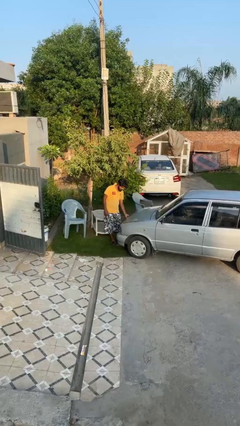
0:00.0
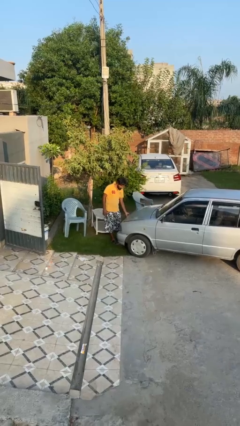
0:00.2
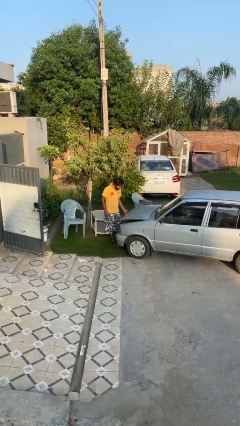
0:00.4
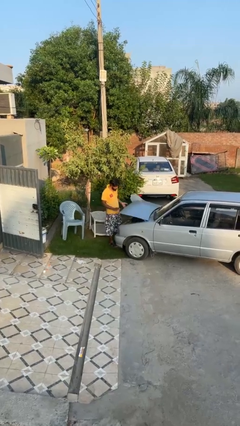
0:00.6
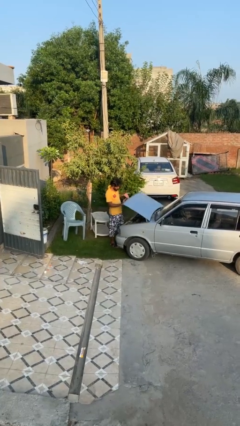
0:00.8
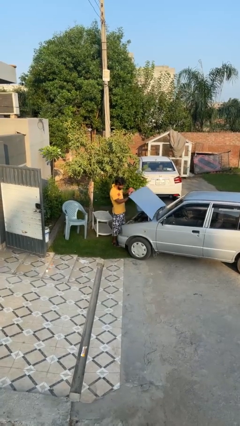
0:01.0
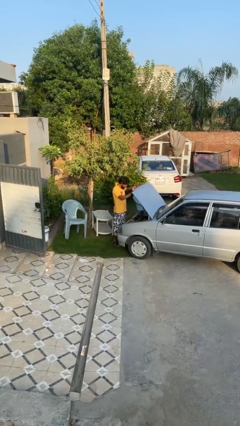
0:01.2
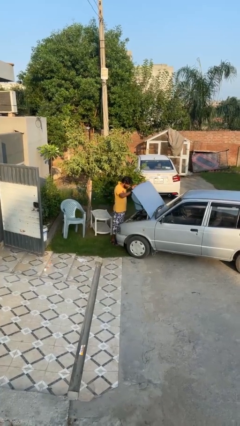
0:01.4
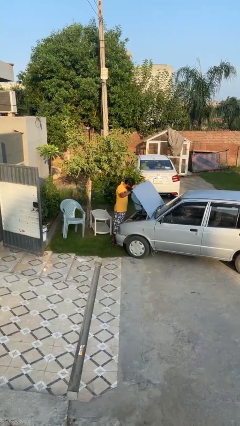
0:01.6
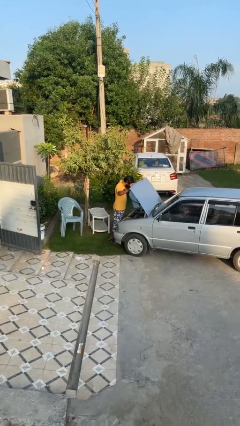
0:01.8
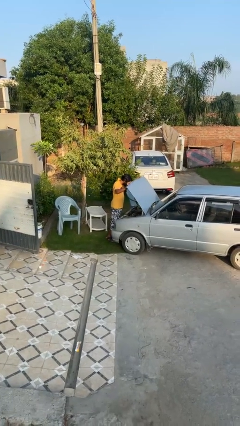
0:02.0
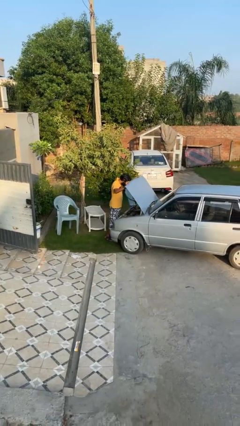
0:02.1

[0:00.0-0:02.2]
person opens car hood

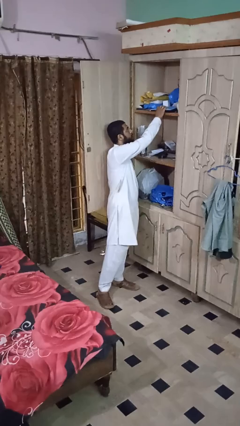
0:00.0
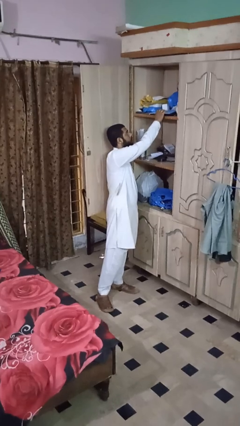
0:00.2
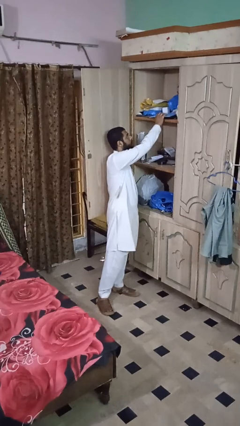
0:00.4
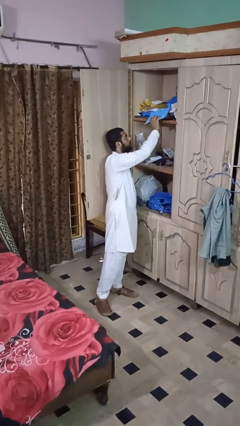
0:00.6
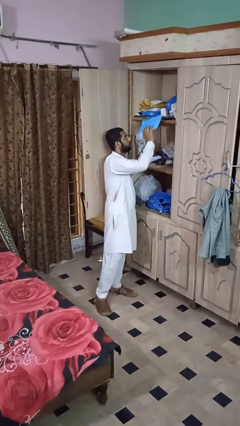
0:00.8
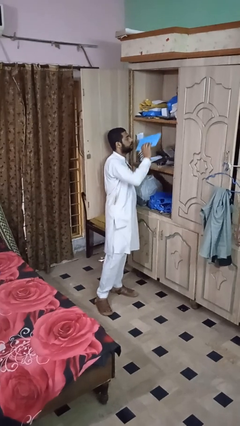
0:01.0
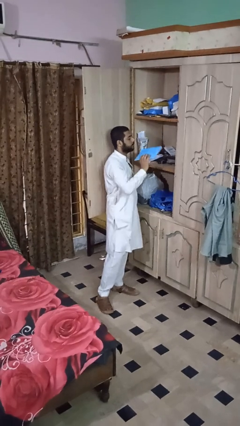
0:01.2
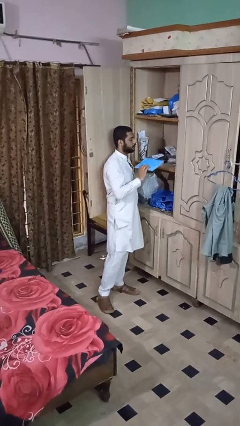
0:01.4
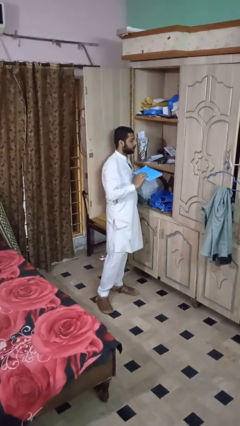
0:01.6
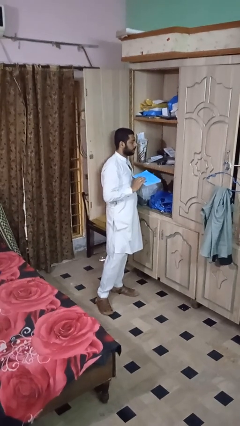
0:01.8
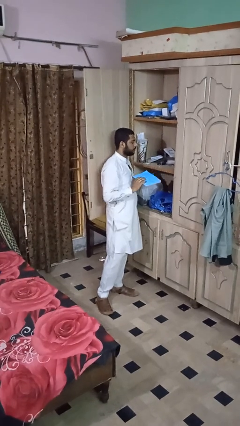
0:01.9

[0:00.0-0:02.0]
person picks up object from shelf

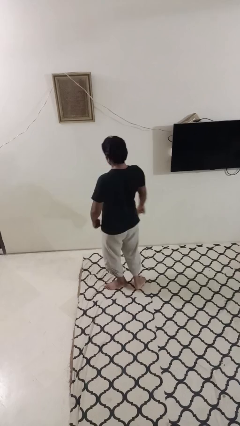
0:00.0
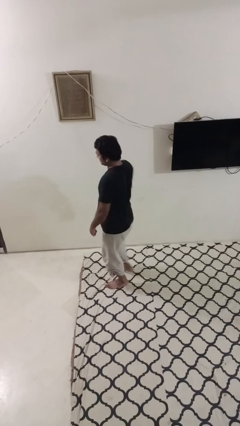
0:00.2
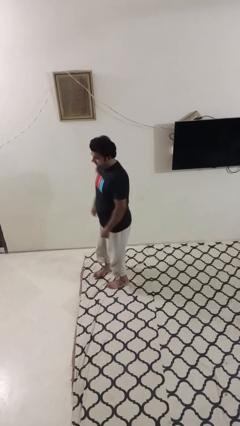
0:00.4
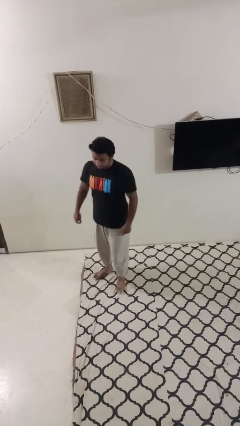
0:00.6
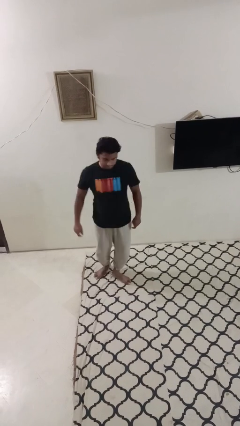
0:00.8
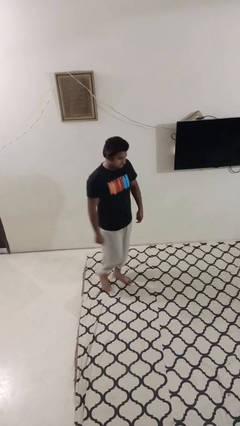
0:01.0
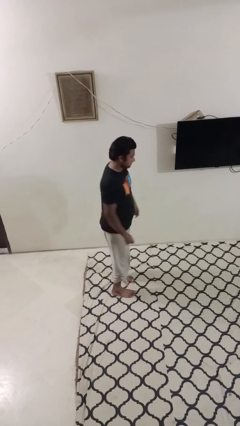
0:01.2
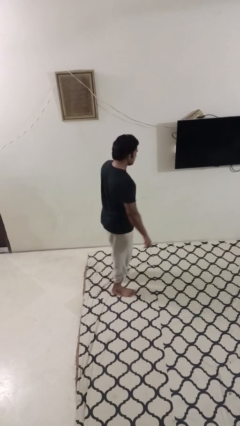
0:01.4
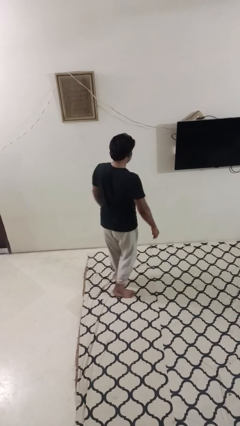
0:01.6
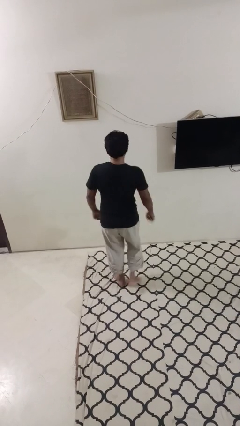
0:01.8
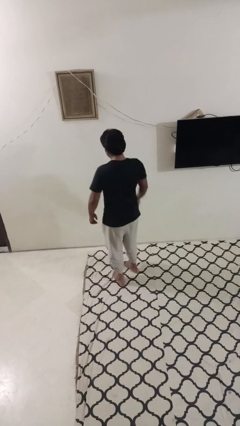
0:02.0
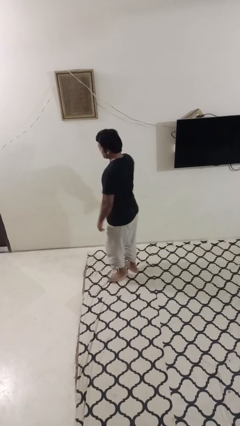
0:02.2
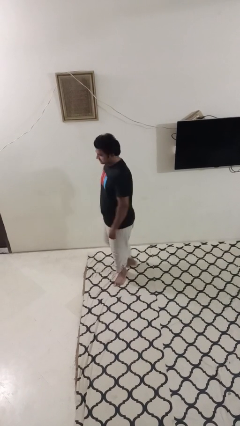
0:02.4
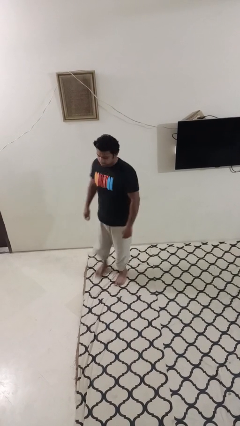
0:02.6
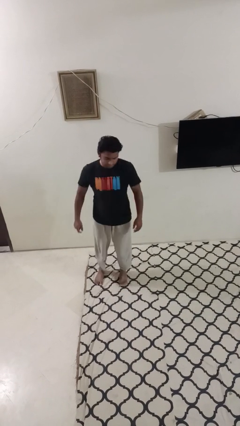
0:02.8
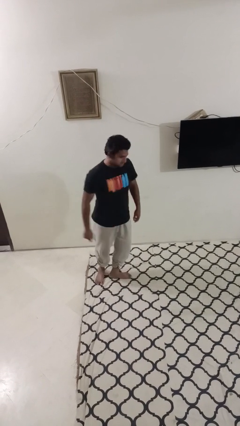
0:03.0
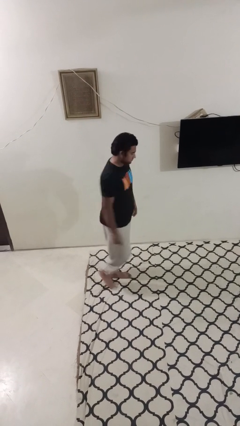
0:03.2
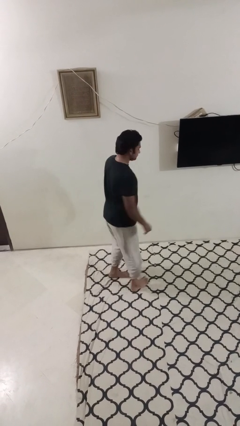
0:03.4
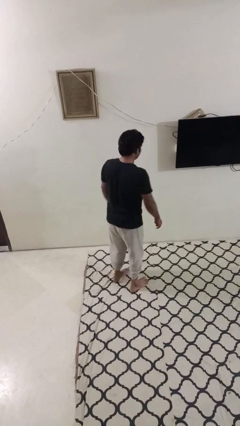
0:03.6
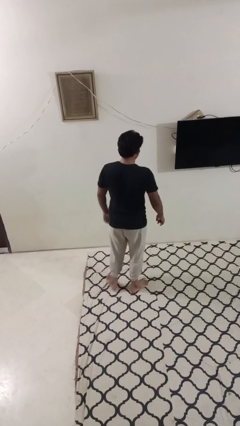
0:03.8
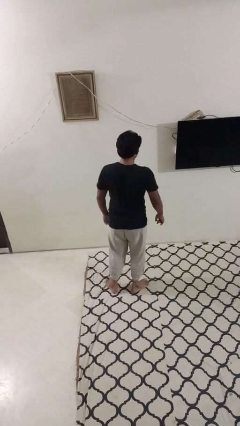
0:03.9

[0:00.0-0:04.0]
person twirls

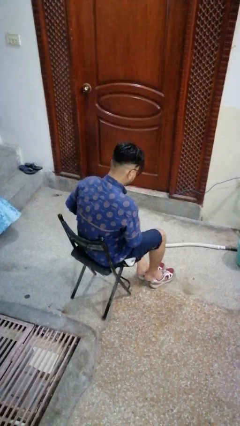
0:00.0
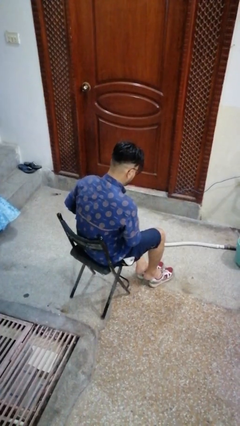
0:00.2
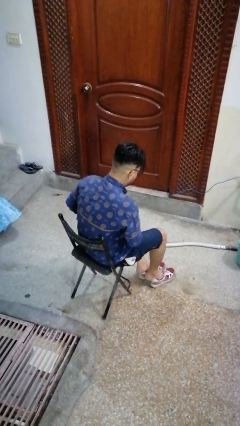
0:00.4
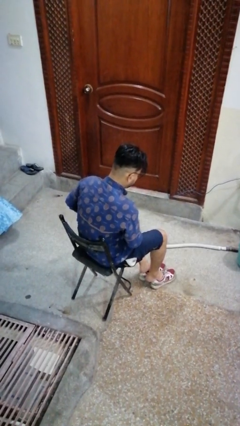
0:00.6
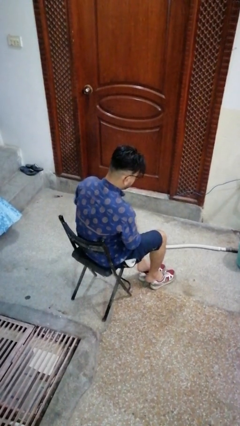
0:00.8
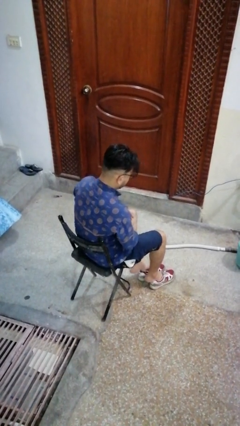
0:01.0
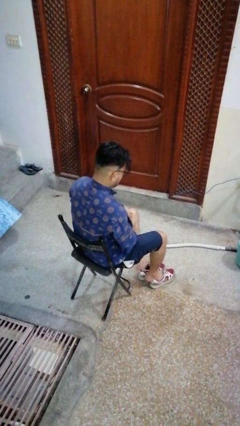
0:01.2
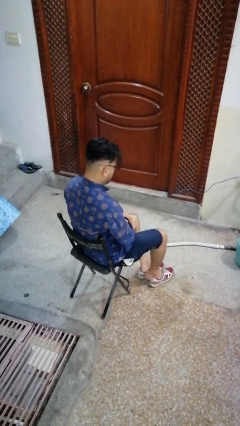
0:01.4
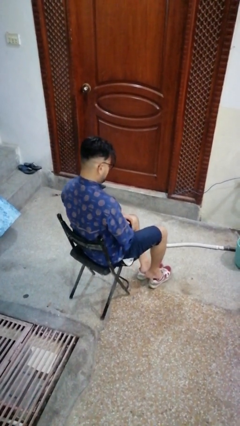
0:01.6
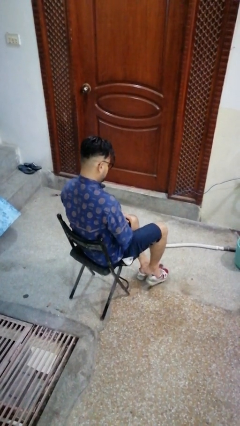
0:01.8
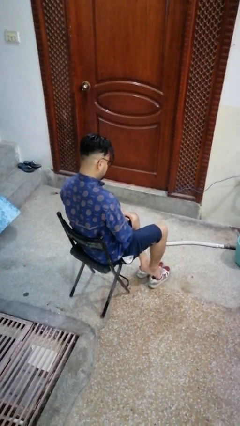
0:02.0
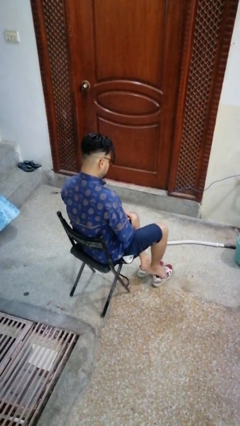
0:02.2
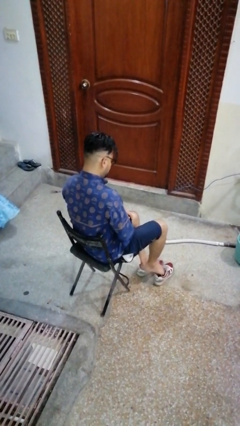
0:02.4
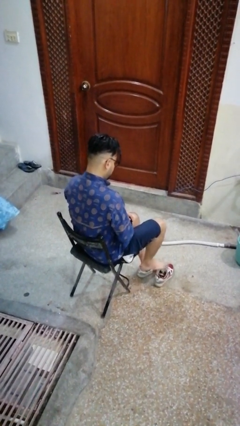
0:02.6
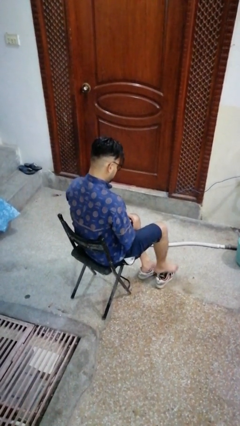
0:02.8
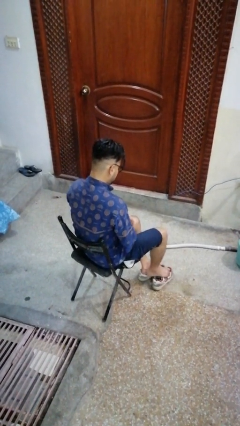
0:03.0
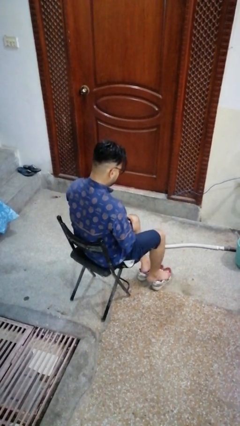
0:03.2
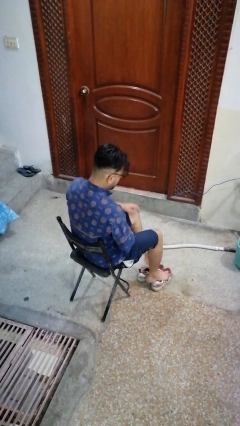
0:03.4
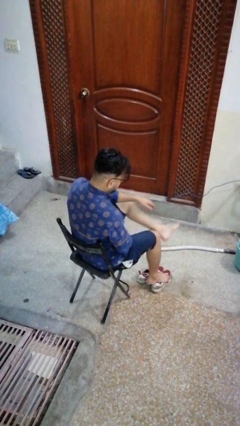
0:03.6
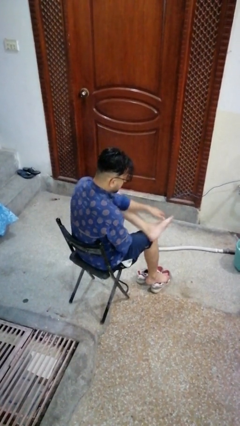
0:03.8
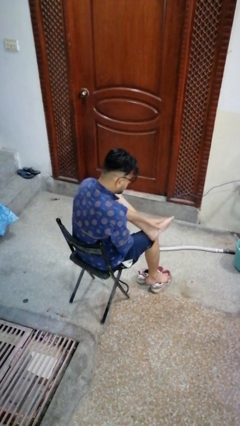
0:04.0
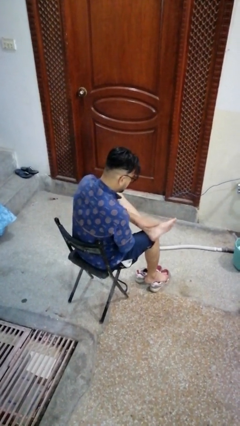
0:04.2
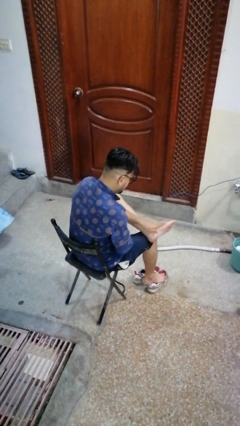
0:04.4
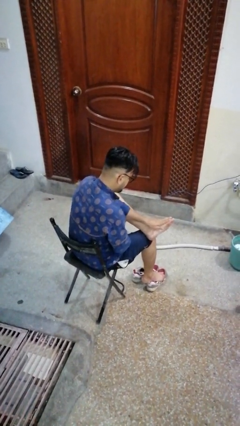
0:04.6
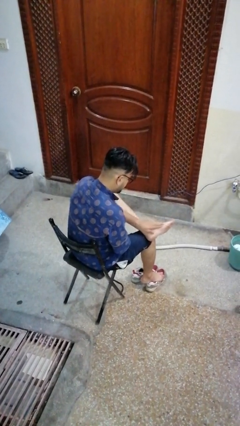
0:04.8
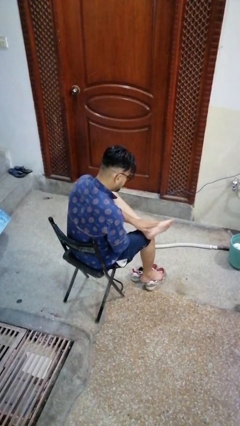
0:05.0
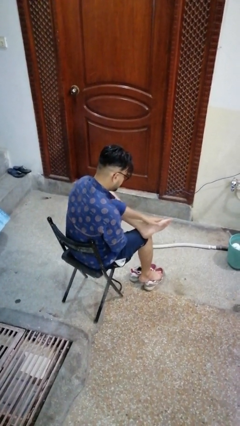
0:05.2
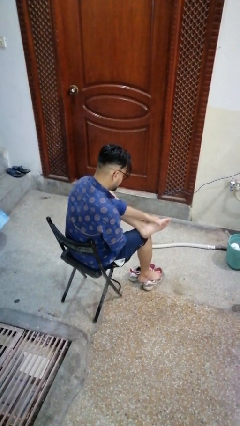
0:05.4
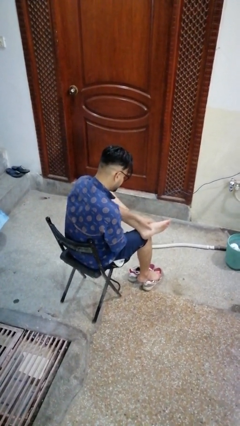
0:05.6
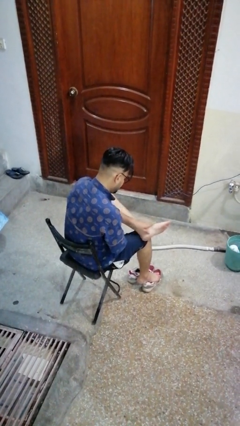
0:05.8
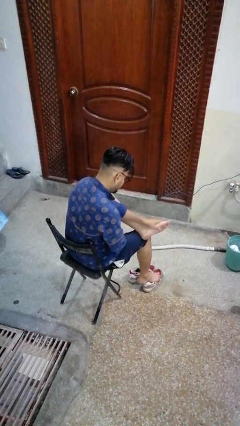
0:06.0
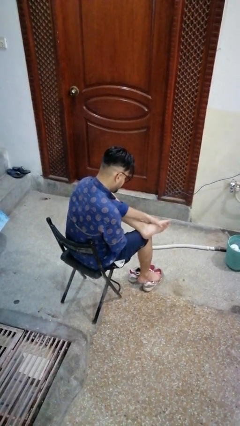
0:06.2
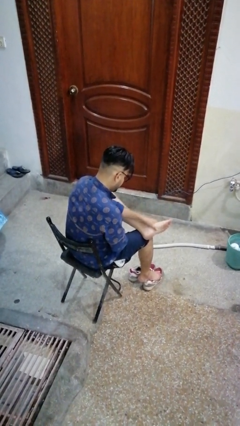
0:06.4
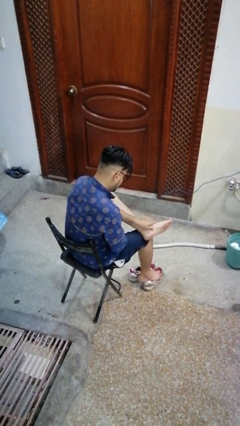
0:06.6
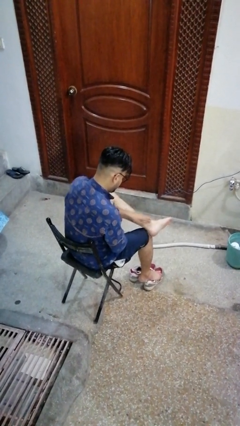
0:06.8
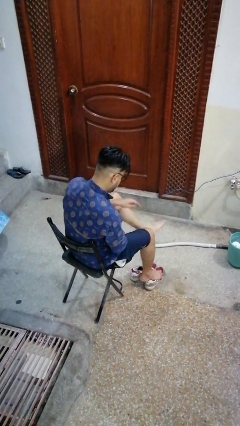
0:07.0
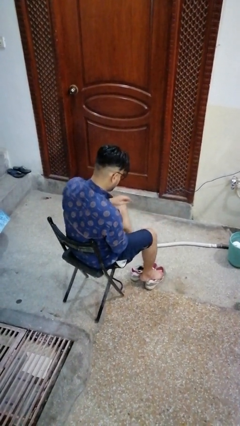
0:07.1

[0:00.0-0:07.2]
person rubs foot

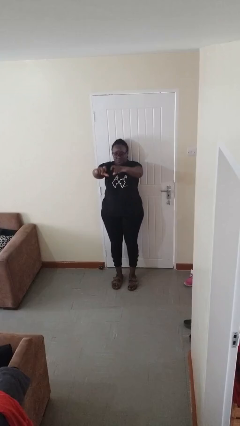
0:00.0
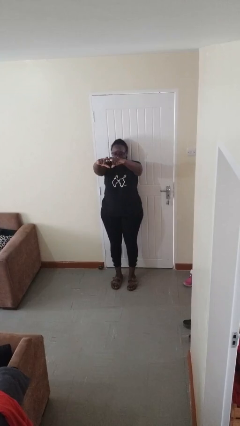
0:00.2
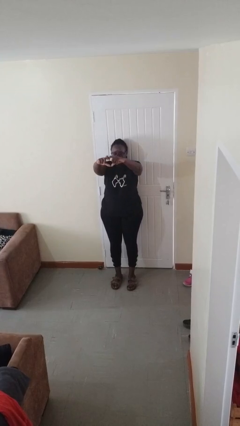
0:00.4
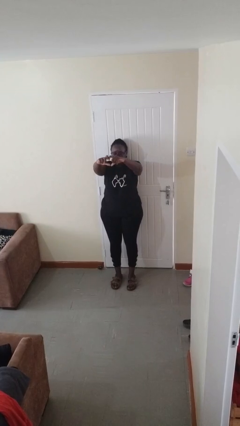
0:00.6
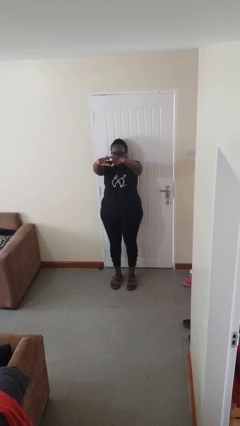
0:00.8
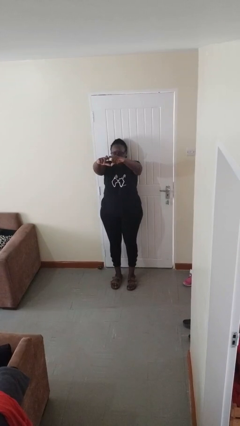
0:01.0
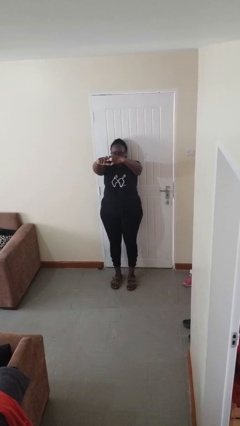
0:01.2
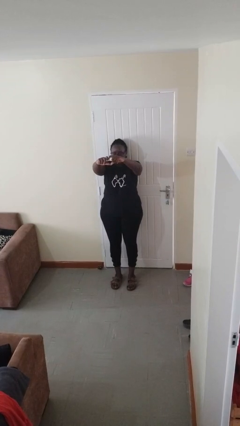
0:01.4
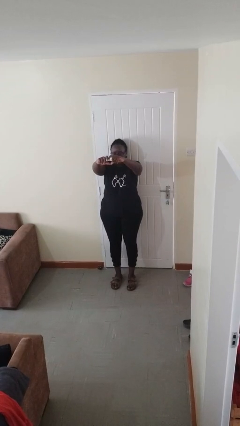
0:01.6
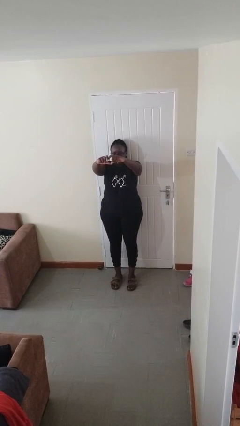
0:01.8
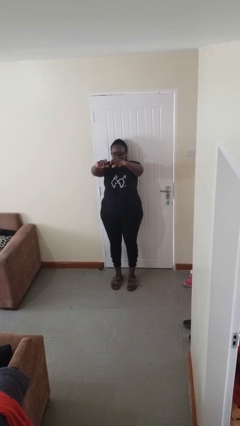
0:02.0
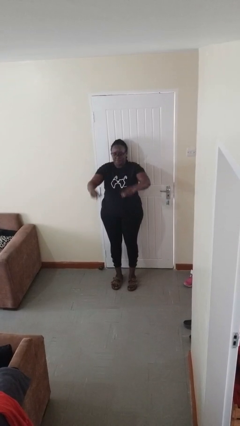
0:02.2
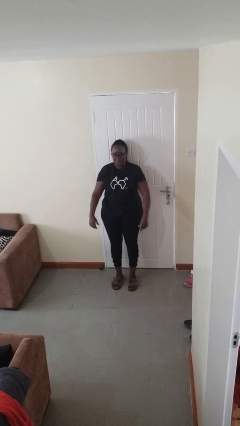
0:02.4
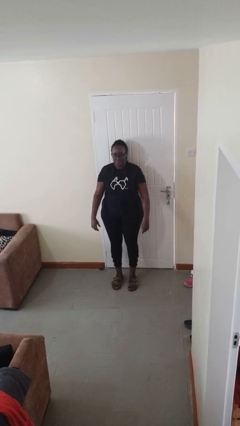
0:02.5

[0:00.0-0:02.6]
person gestures heart
